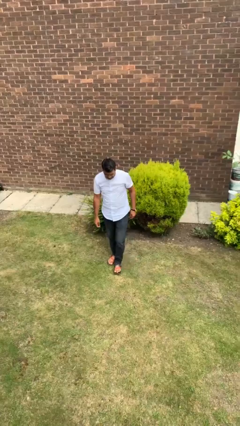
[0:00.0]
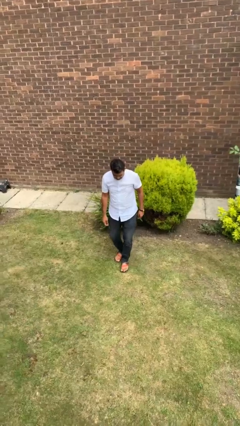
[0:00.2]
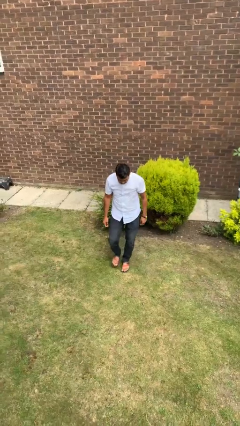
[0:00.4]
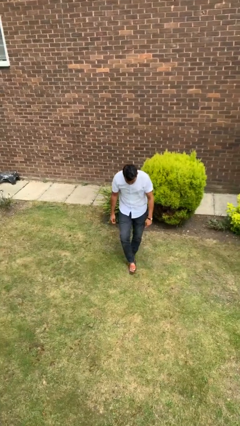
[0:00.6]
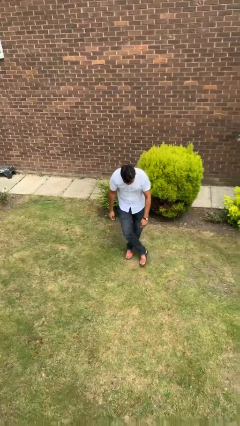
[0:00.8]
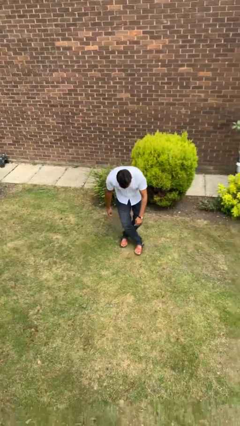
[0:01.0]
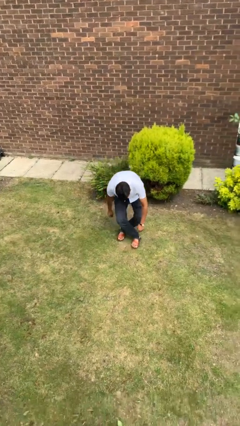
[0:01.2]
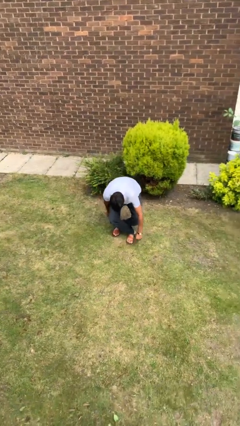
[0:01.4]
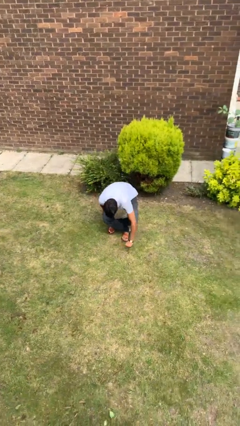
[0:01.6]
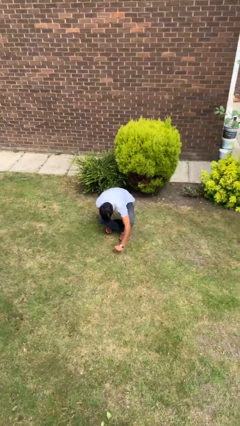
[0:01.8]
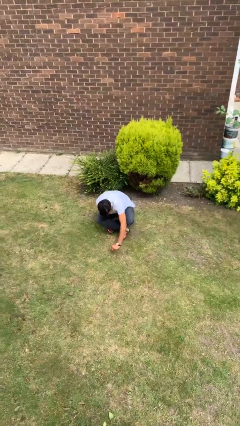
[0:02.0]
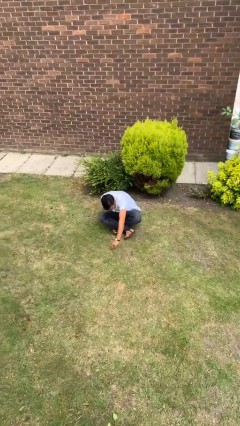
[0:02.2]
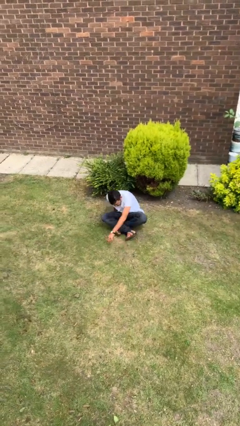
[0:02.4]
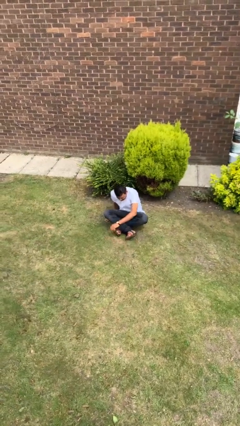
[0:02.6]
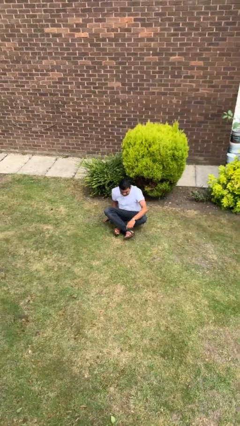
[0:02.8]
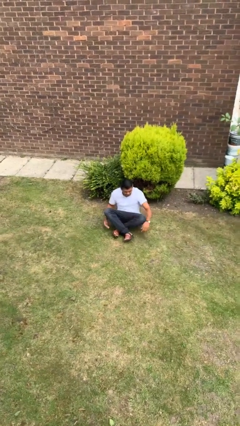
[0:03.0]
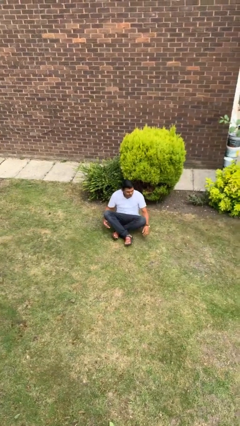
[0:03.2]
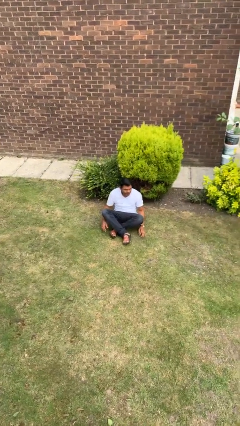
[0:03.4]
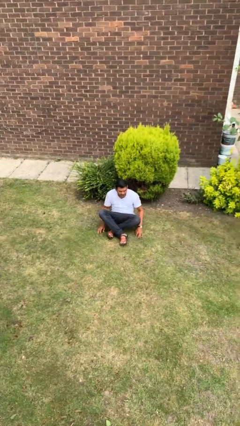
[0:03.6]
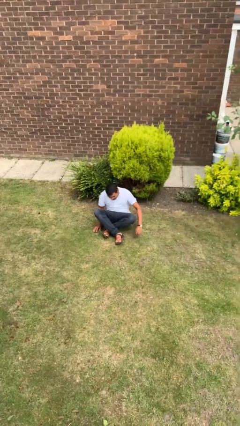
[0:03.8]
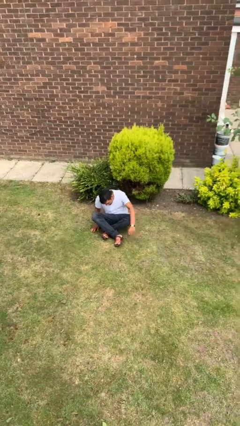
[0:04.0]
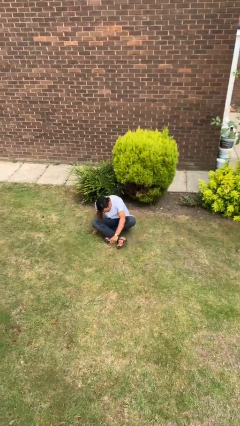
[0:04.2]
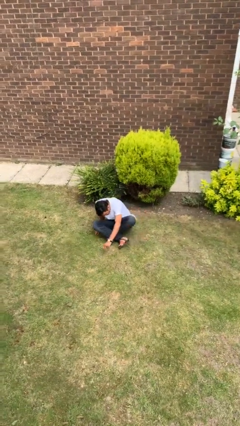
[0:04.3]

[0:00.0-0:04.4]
person sits crisscross

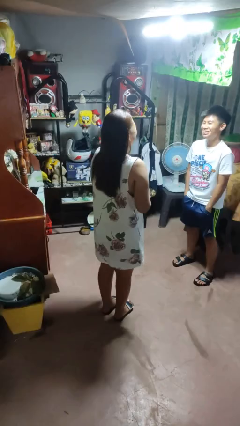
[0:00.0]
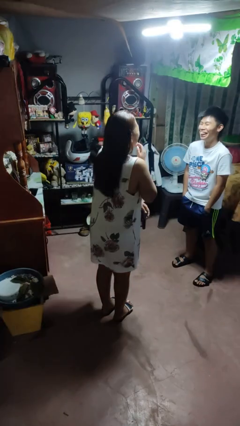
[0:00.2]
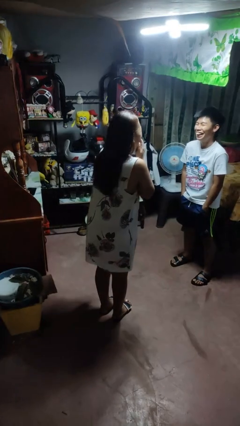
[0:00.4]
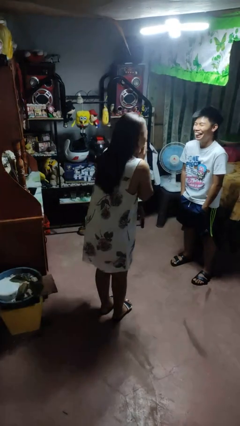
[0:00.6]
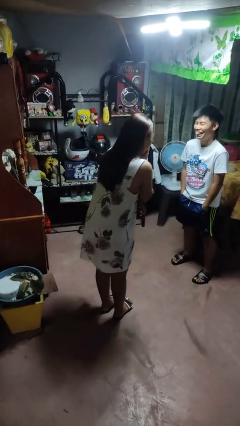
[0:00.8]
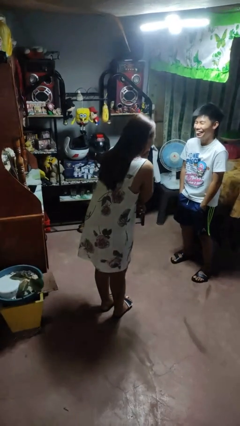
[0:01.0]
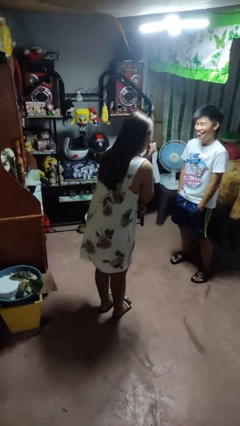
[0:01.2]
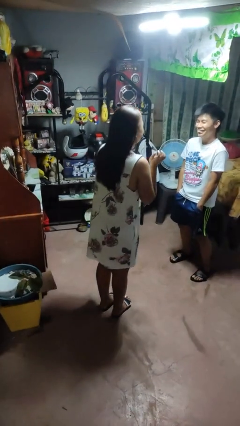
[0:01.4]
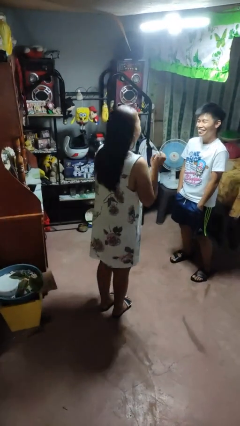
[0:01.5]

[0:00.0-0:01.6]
person laughs with person

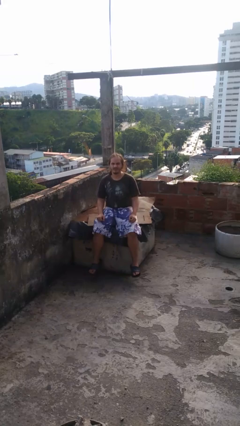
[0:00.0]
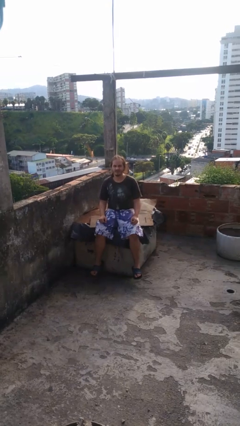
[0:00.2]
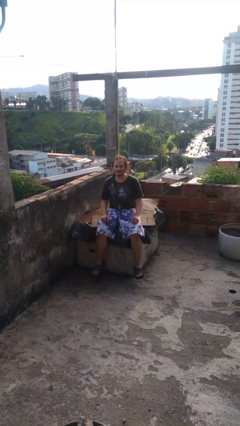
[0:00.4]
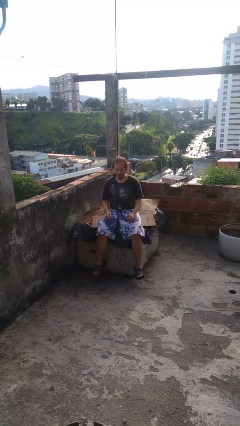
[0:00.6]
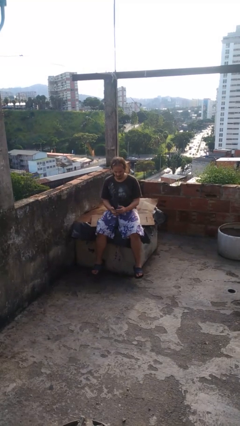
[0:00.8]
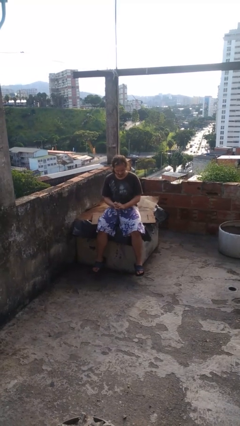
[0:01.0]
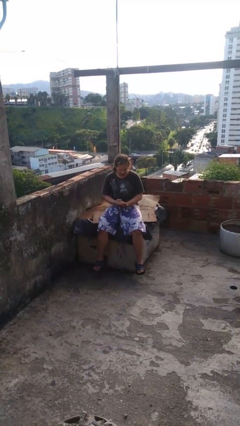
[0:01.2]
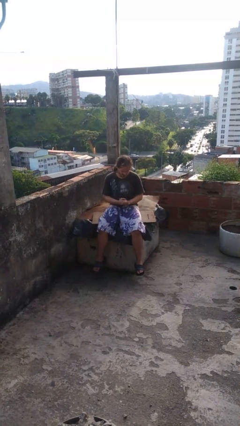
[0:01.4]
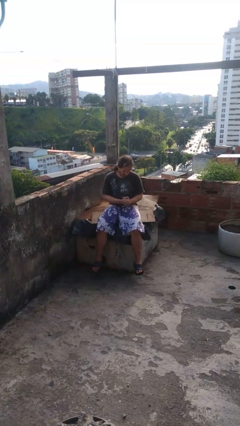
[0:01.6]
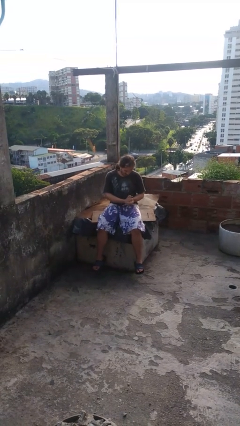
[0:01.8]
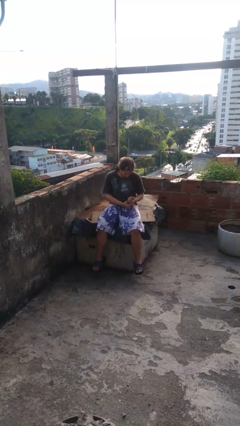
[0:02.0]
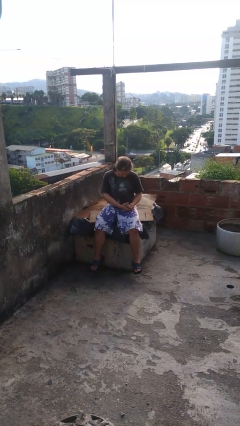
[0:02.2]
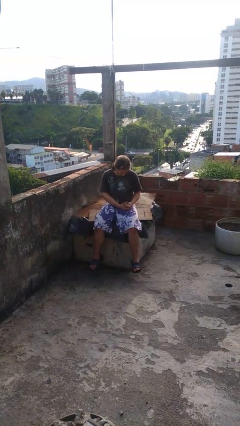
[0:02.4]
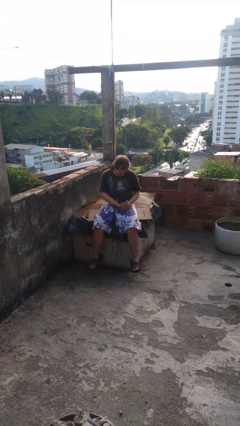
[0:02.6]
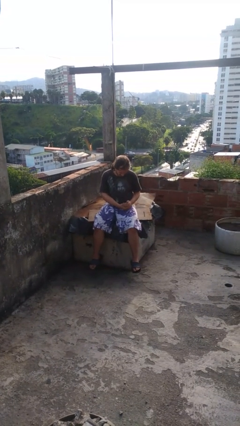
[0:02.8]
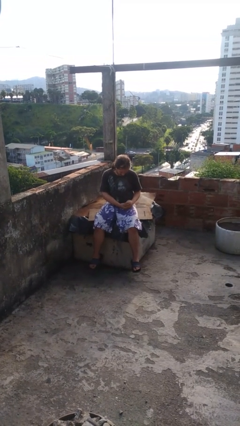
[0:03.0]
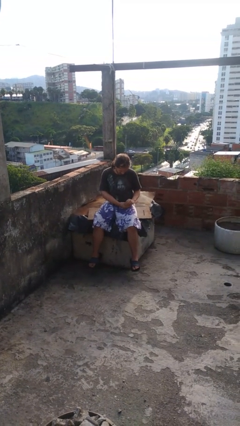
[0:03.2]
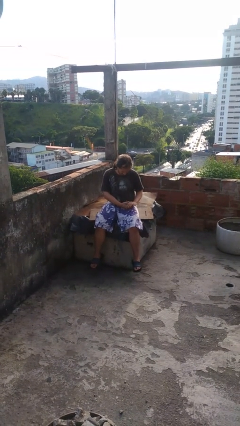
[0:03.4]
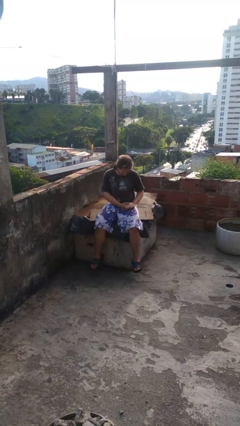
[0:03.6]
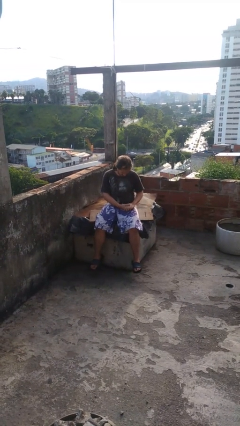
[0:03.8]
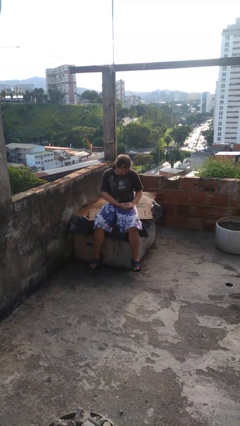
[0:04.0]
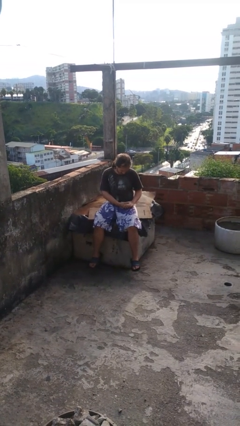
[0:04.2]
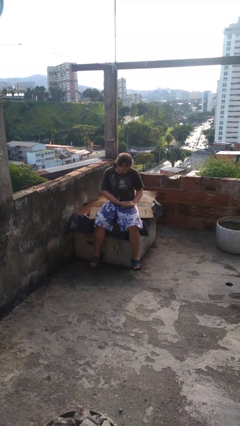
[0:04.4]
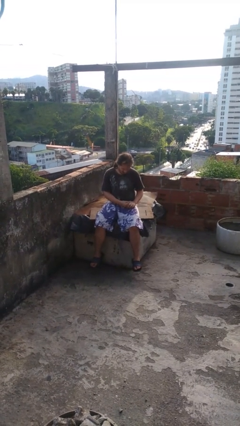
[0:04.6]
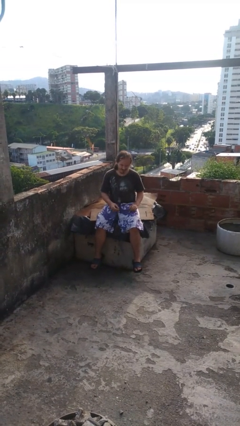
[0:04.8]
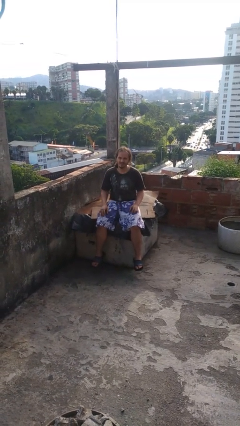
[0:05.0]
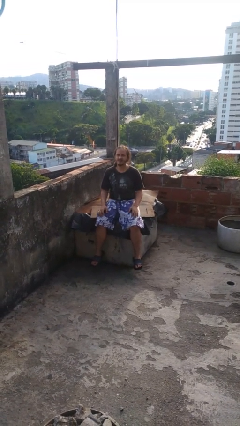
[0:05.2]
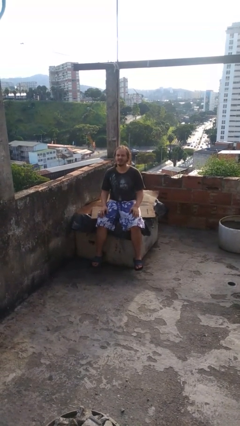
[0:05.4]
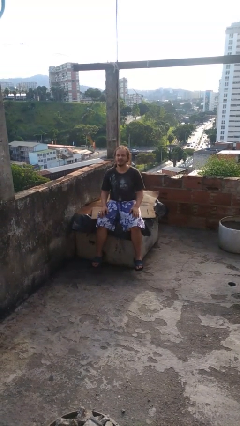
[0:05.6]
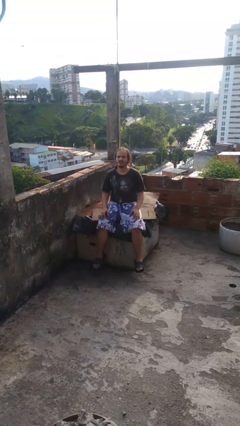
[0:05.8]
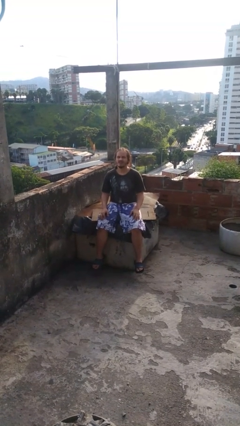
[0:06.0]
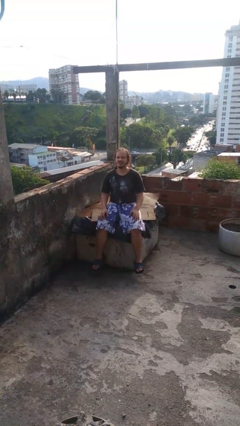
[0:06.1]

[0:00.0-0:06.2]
person looks at hands in lap

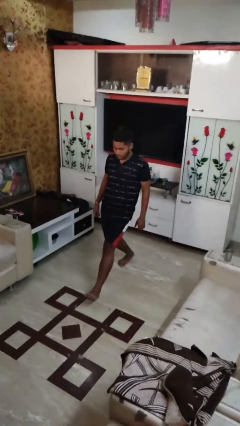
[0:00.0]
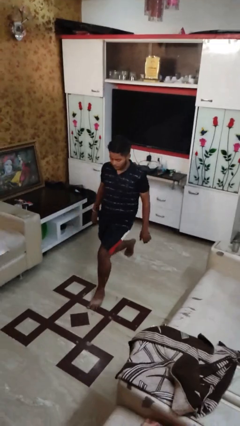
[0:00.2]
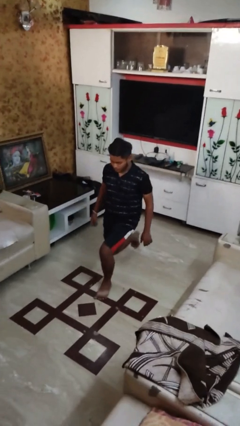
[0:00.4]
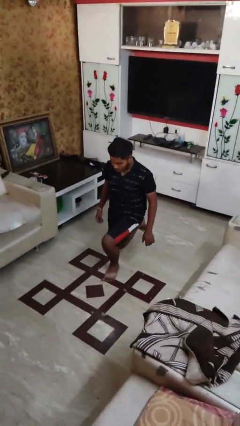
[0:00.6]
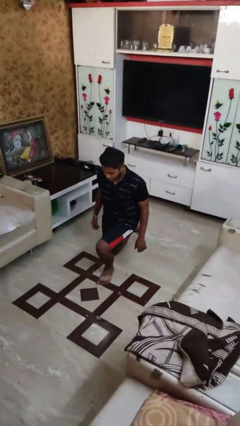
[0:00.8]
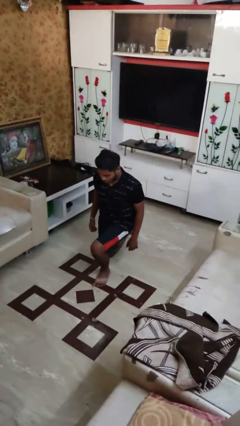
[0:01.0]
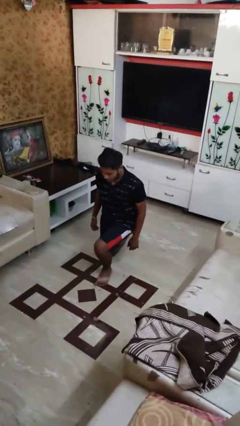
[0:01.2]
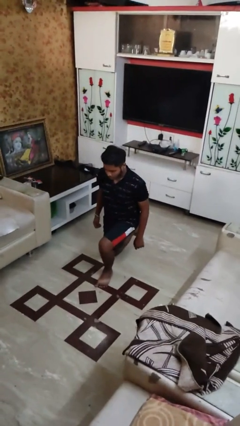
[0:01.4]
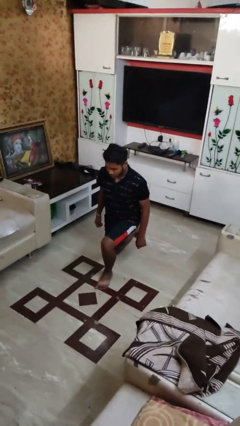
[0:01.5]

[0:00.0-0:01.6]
person exercises with lunges

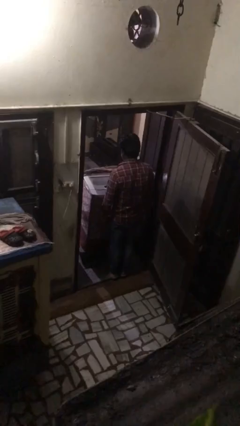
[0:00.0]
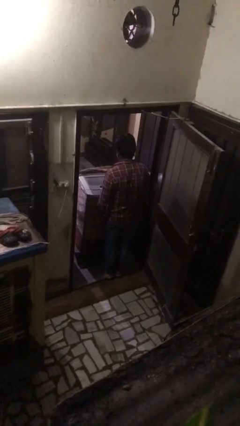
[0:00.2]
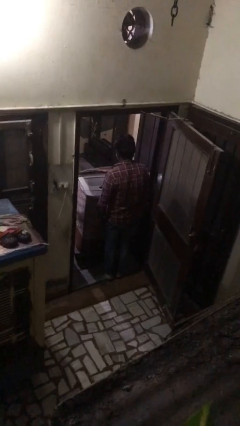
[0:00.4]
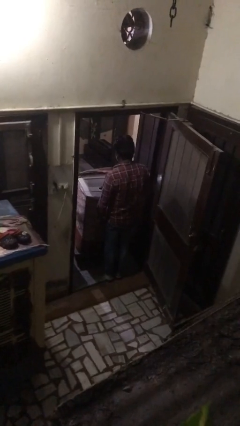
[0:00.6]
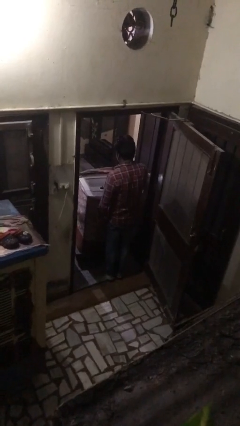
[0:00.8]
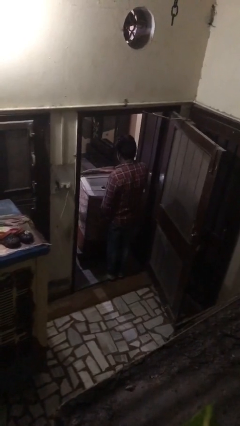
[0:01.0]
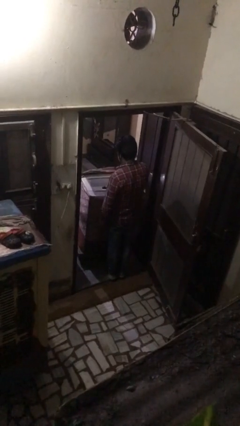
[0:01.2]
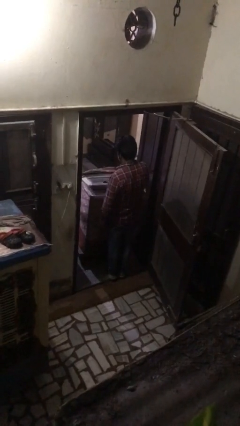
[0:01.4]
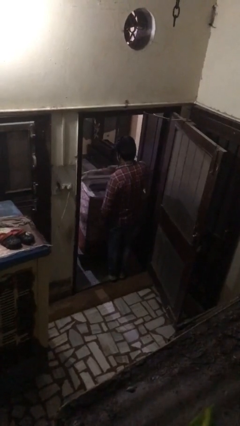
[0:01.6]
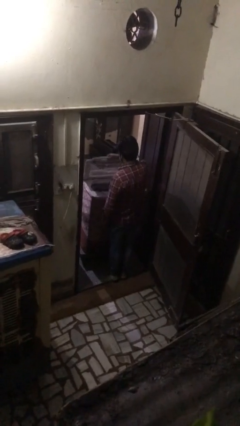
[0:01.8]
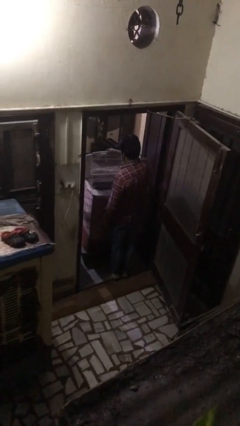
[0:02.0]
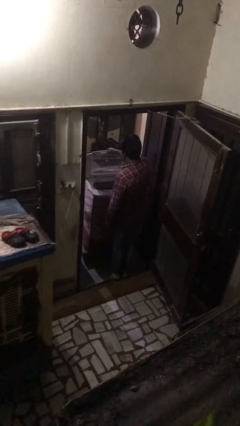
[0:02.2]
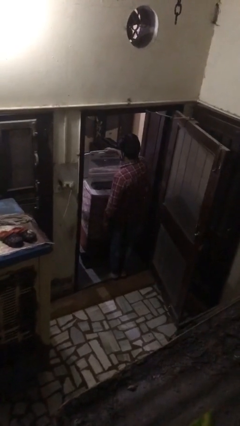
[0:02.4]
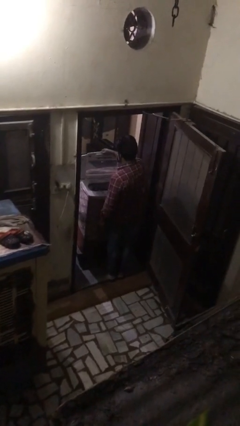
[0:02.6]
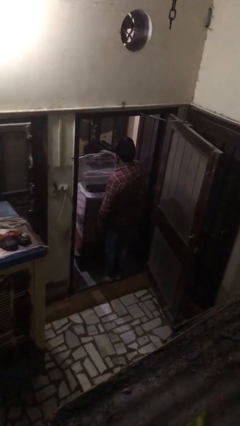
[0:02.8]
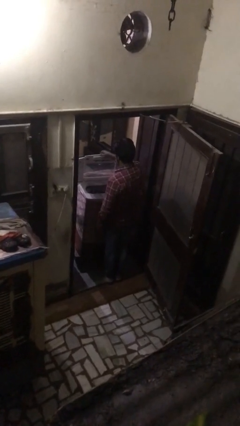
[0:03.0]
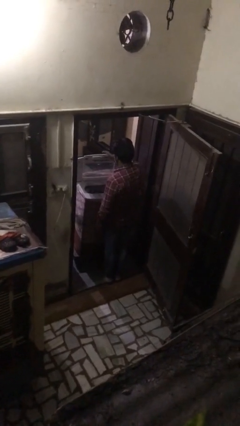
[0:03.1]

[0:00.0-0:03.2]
person opens clothes washer

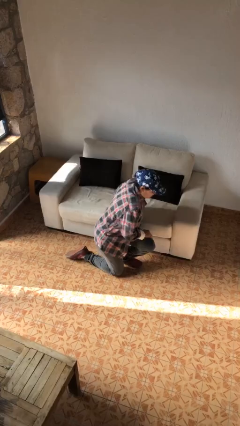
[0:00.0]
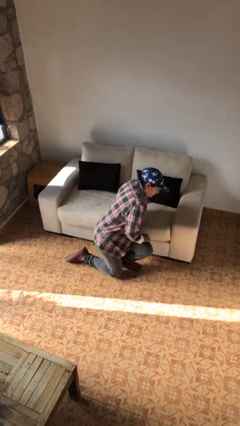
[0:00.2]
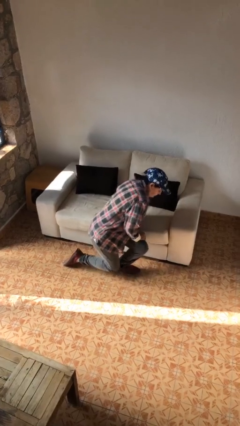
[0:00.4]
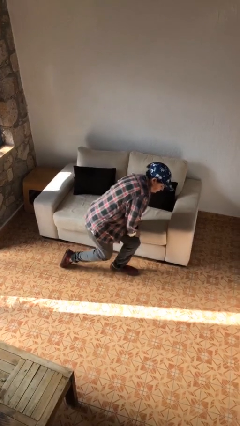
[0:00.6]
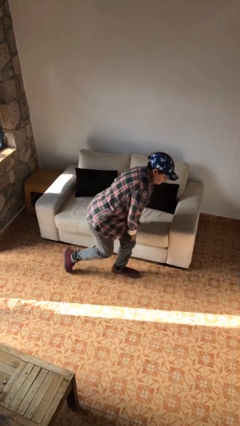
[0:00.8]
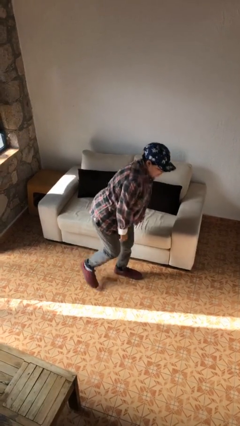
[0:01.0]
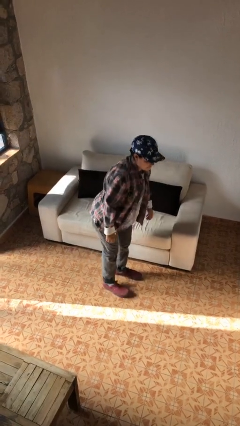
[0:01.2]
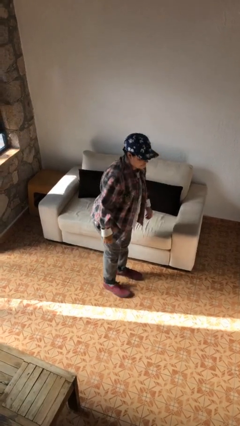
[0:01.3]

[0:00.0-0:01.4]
person stands up from floor
